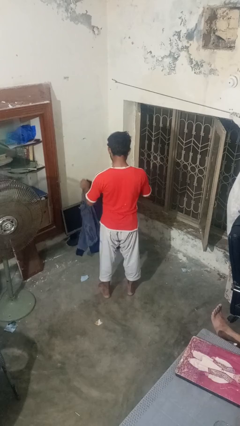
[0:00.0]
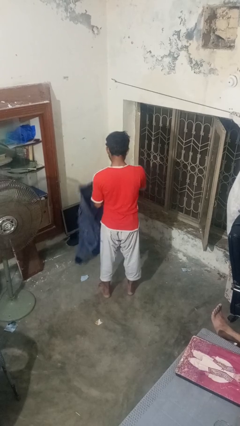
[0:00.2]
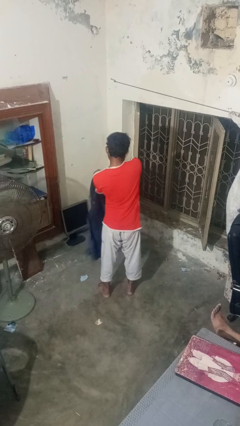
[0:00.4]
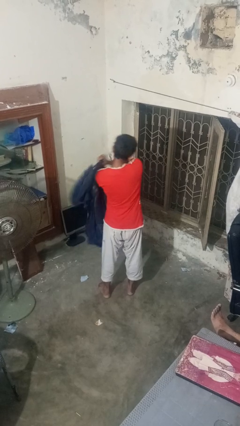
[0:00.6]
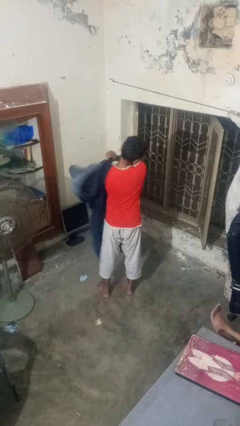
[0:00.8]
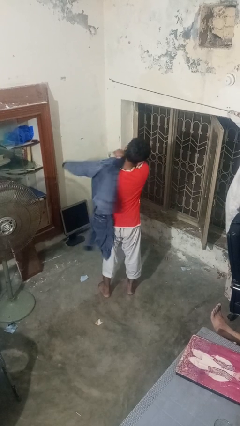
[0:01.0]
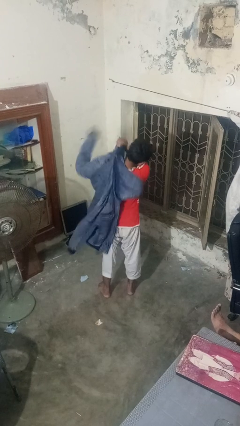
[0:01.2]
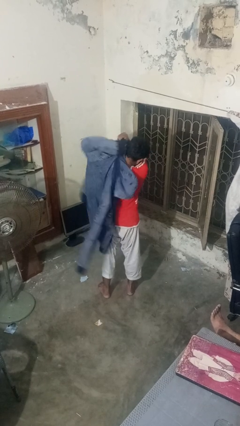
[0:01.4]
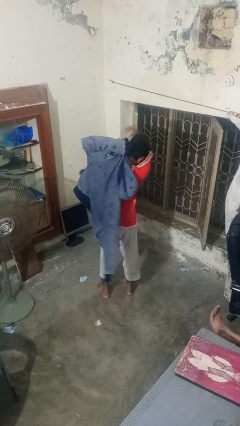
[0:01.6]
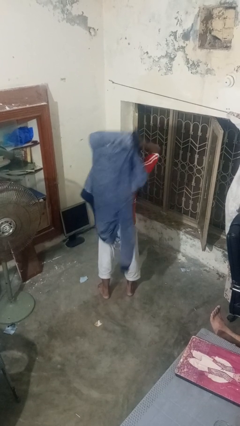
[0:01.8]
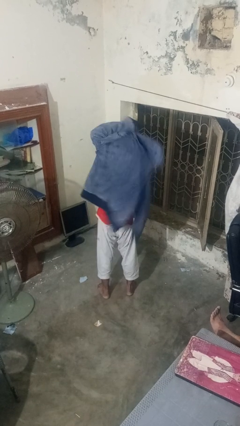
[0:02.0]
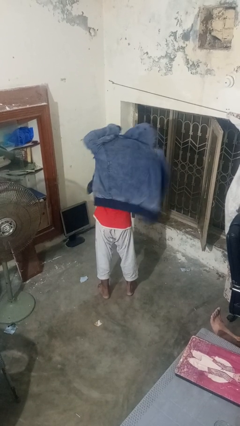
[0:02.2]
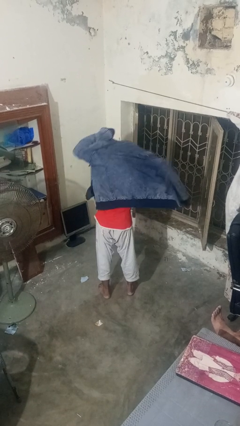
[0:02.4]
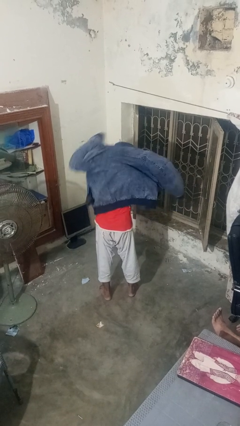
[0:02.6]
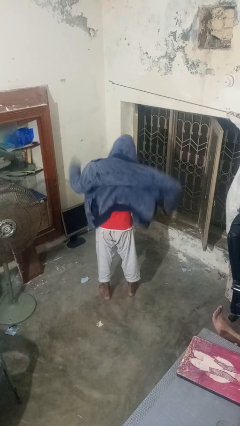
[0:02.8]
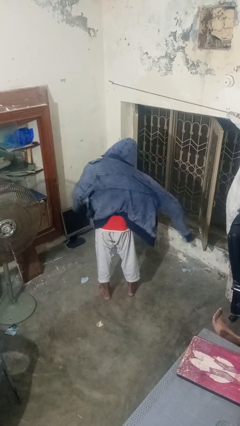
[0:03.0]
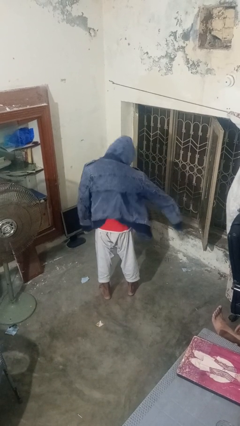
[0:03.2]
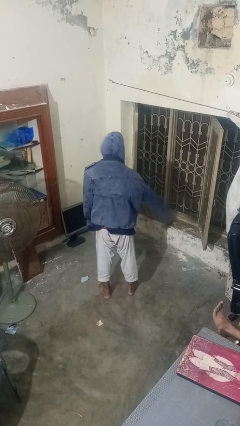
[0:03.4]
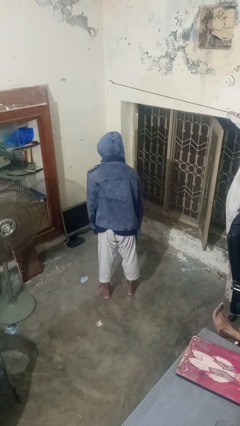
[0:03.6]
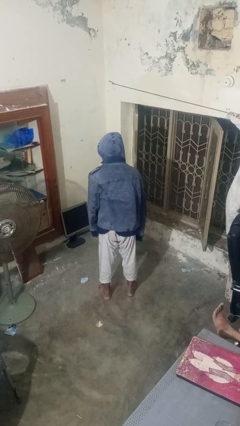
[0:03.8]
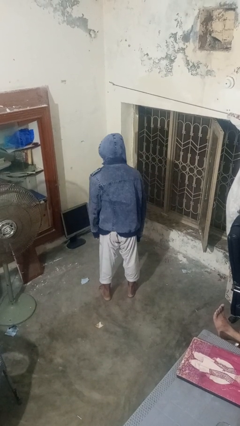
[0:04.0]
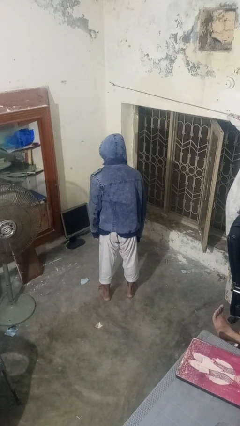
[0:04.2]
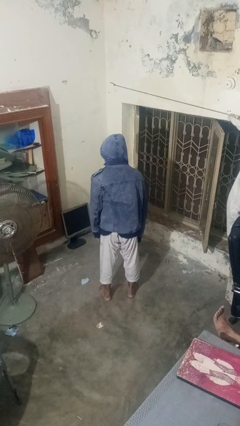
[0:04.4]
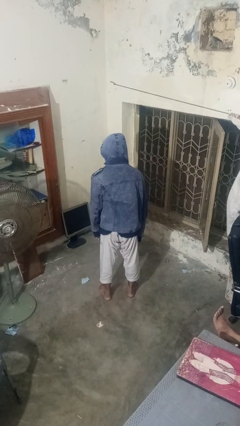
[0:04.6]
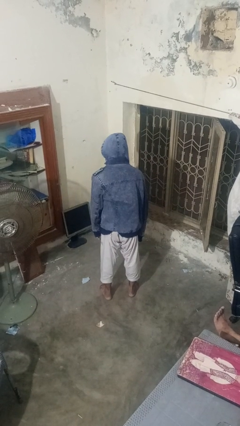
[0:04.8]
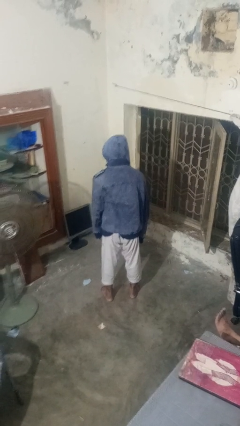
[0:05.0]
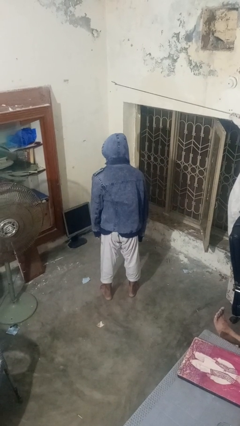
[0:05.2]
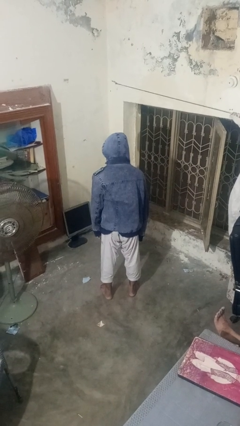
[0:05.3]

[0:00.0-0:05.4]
person puts on hoodie

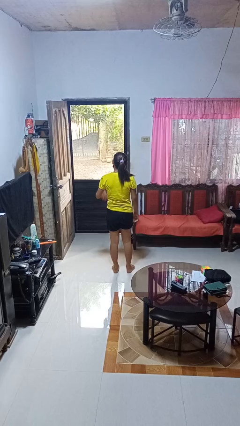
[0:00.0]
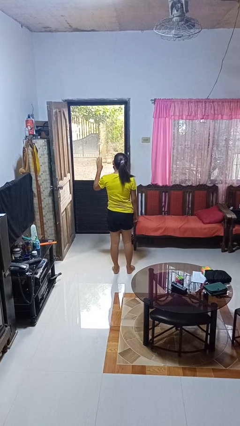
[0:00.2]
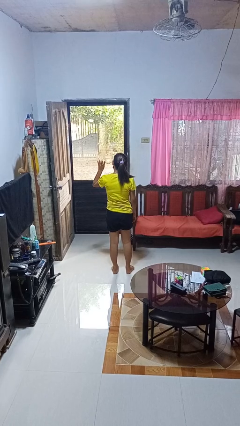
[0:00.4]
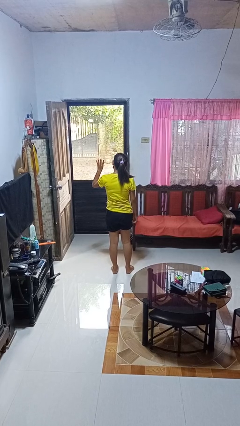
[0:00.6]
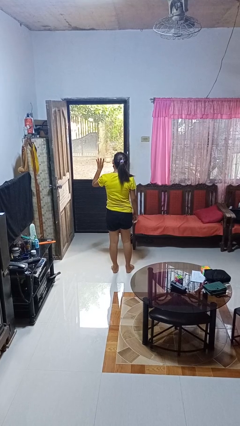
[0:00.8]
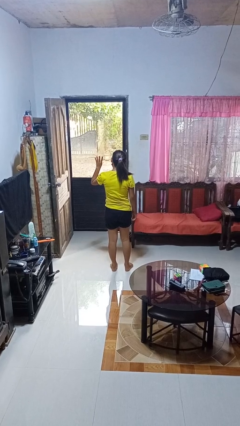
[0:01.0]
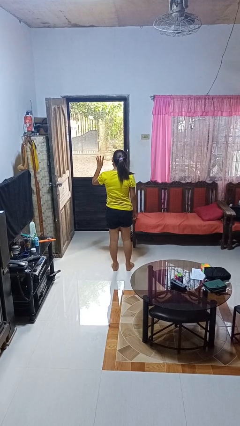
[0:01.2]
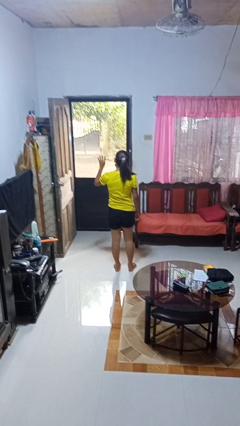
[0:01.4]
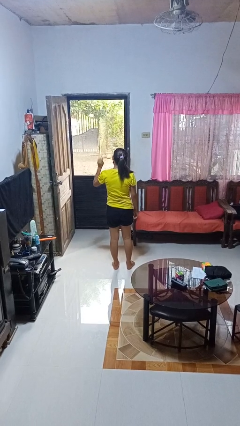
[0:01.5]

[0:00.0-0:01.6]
person gestures number four

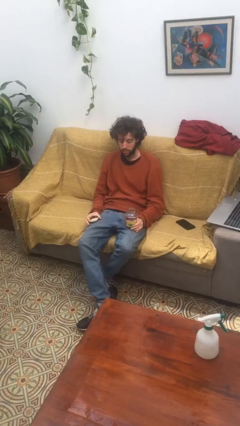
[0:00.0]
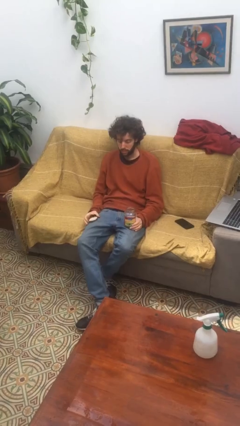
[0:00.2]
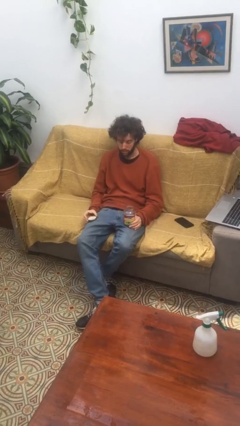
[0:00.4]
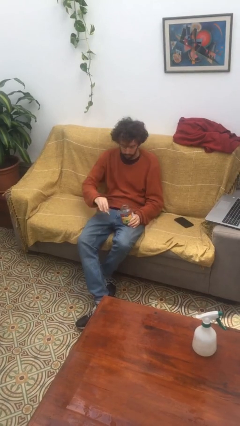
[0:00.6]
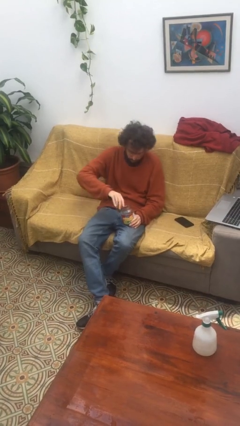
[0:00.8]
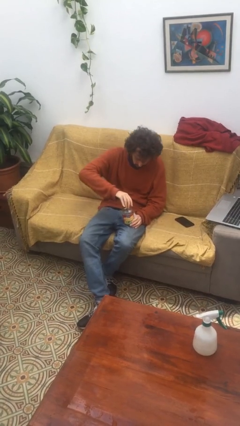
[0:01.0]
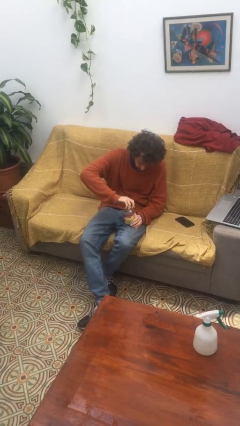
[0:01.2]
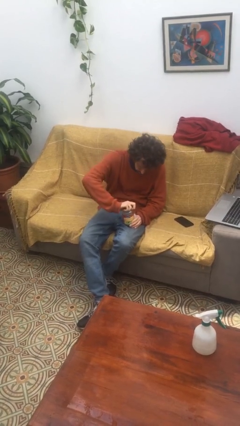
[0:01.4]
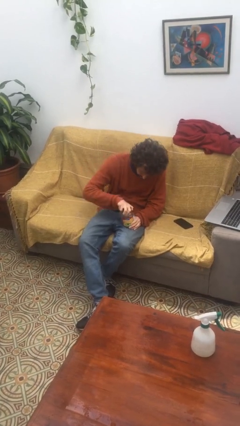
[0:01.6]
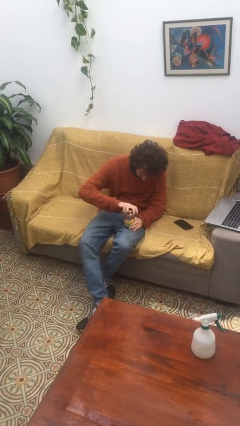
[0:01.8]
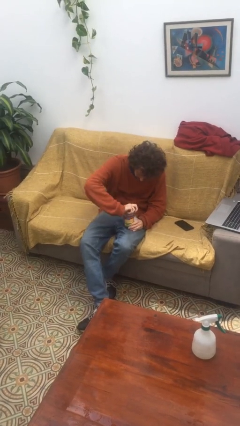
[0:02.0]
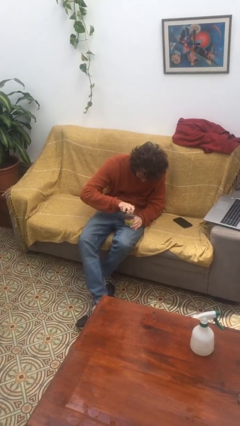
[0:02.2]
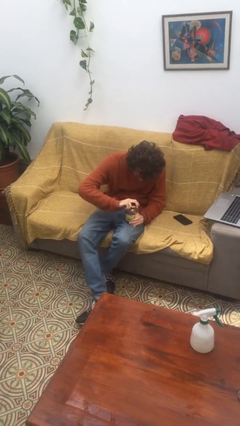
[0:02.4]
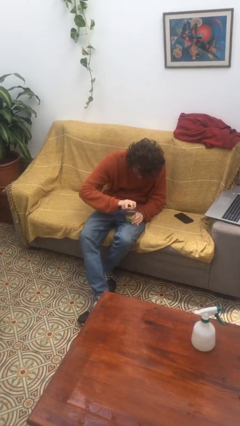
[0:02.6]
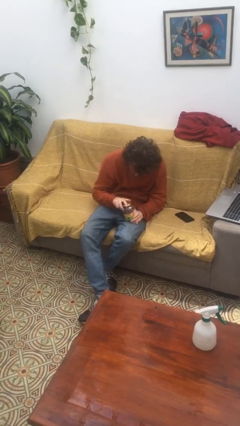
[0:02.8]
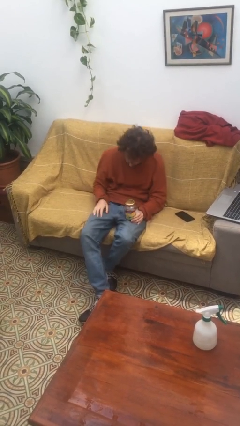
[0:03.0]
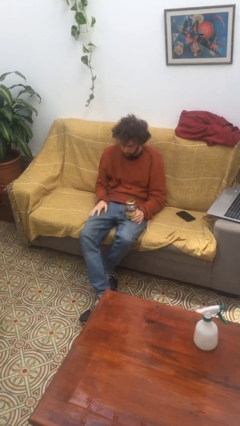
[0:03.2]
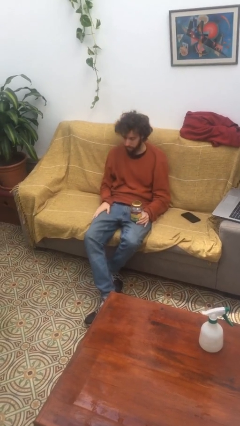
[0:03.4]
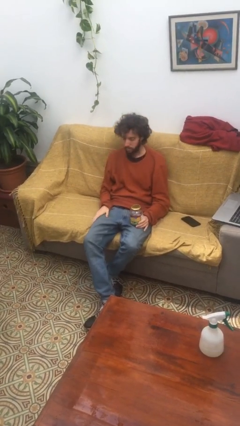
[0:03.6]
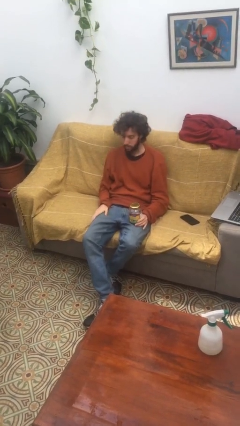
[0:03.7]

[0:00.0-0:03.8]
person closes jar

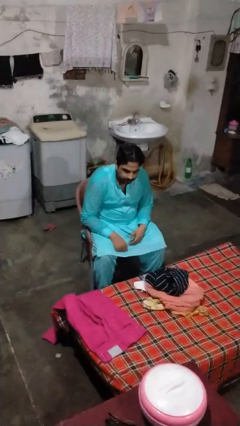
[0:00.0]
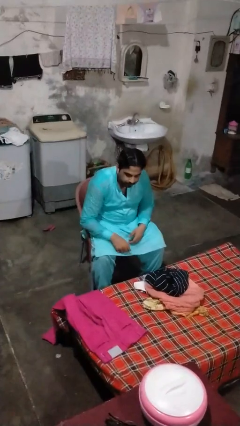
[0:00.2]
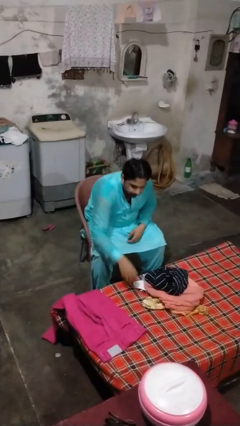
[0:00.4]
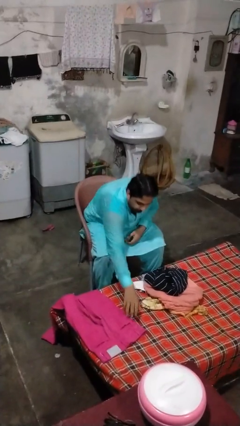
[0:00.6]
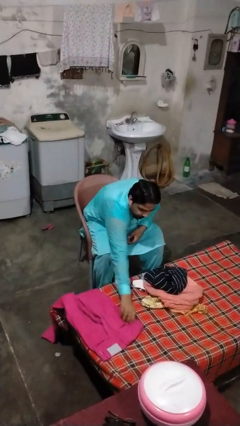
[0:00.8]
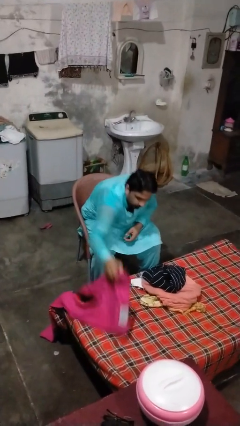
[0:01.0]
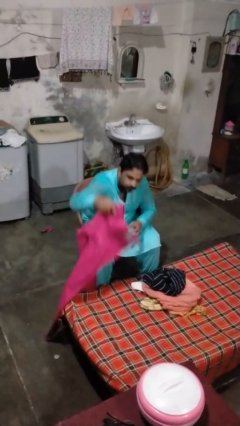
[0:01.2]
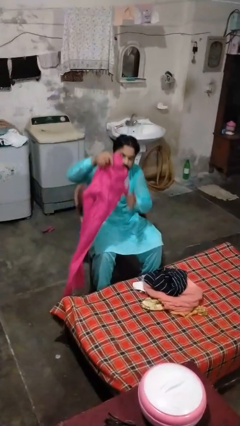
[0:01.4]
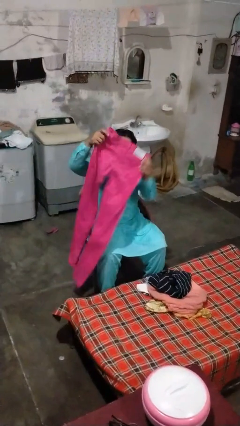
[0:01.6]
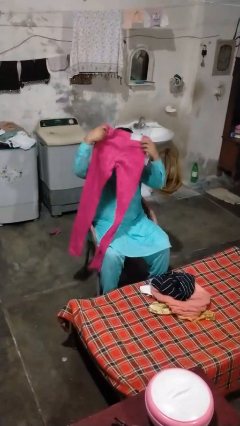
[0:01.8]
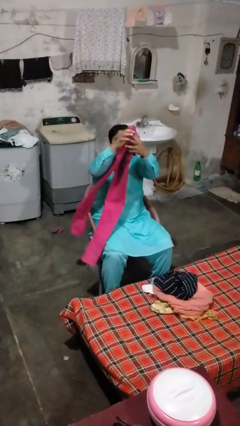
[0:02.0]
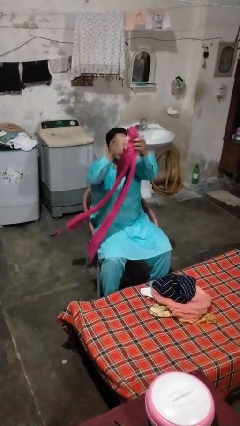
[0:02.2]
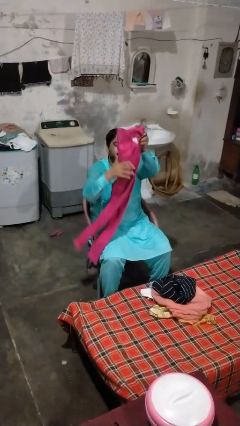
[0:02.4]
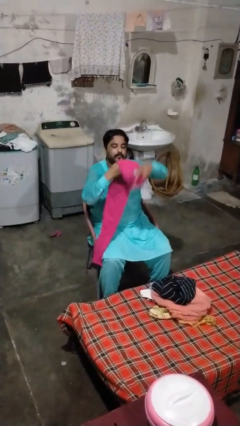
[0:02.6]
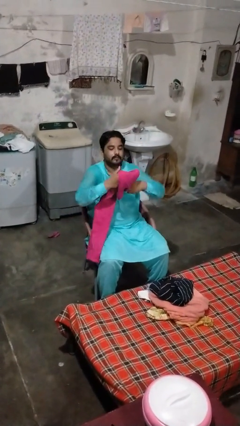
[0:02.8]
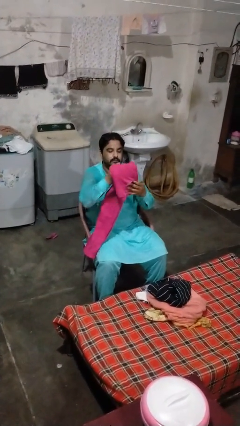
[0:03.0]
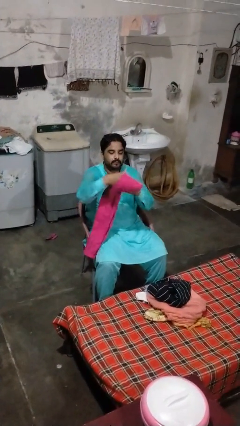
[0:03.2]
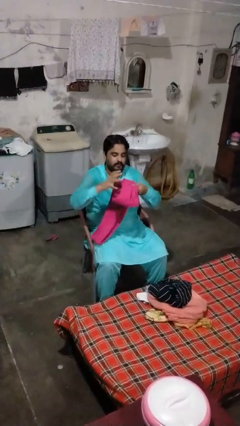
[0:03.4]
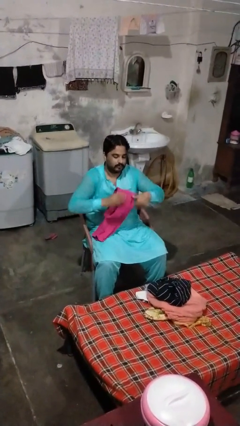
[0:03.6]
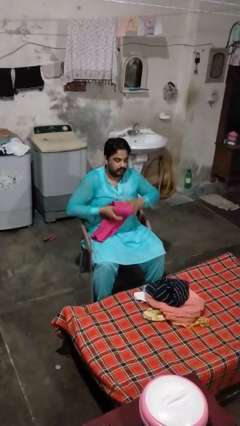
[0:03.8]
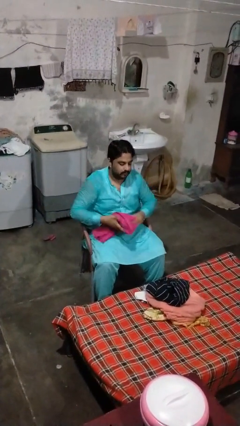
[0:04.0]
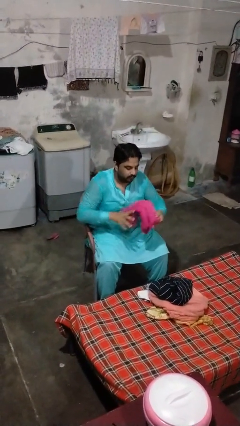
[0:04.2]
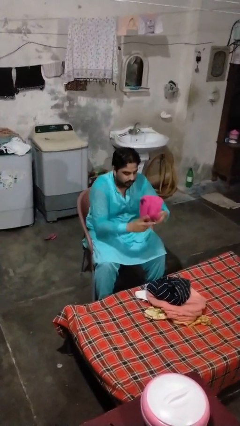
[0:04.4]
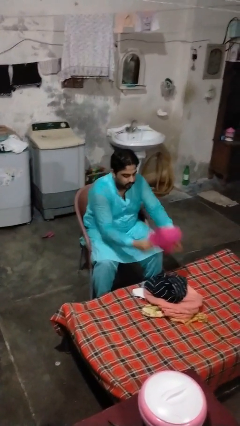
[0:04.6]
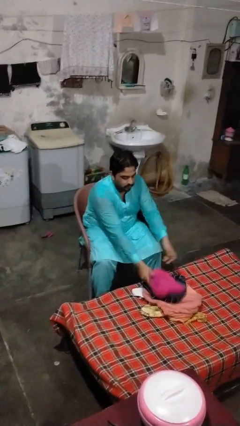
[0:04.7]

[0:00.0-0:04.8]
person folds pants

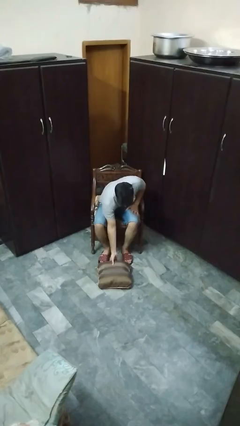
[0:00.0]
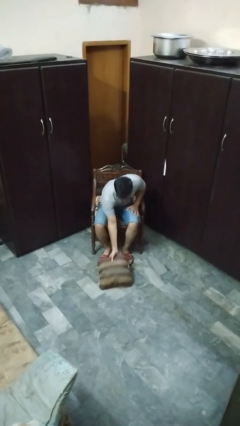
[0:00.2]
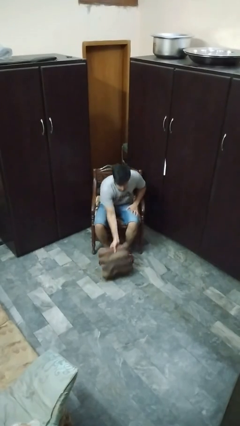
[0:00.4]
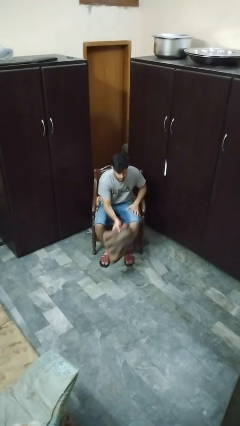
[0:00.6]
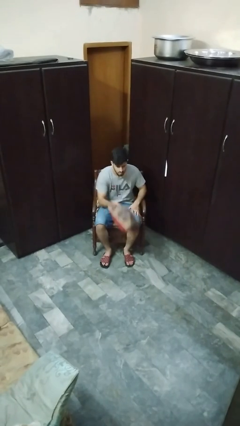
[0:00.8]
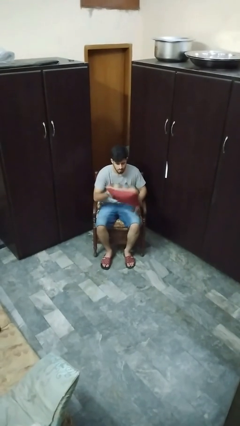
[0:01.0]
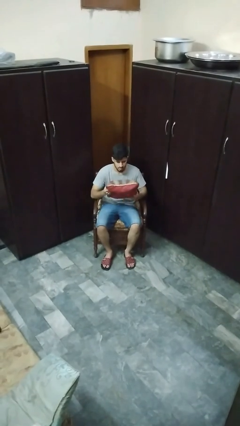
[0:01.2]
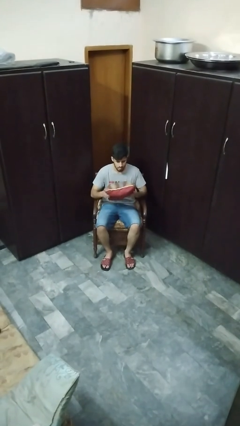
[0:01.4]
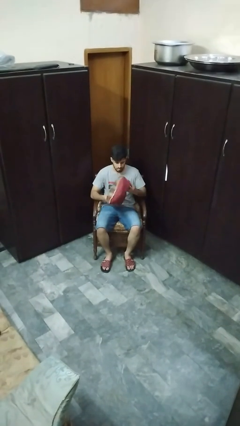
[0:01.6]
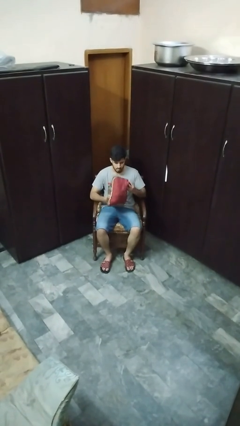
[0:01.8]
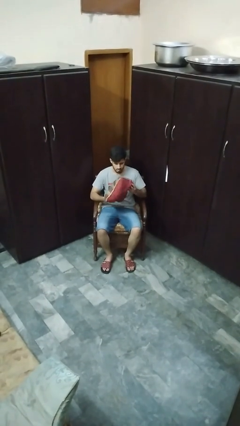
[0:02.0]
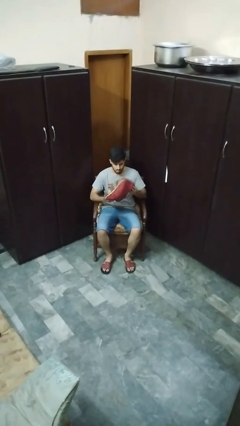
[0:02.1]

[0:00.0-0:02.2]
person picks up object from floor

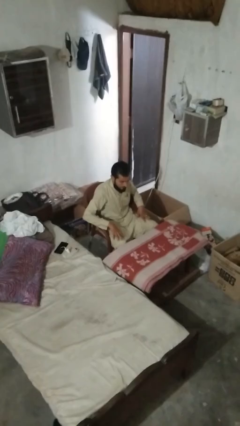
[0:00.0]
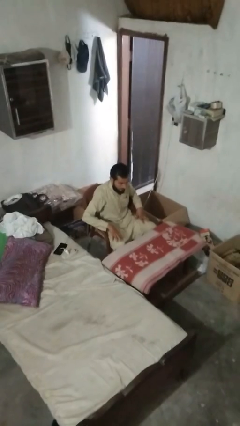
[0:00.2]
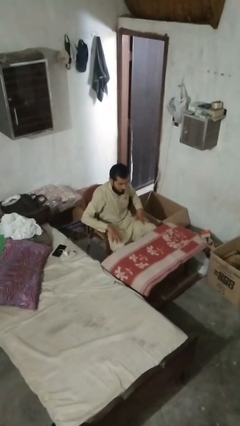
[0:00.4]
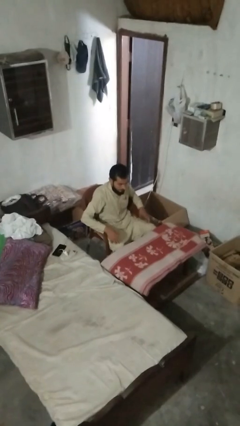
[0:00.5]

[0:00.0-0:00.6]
person folds tablecloth
